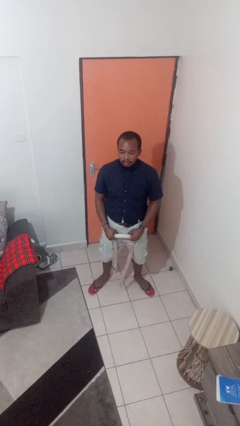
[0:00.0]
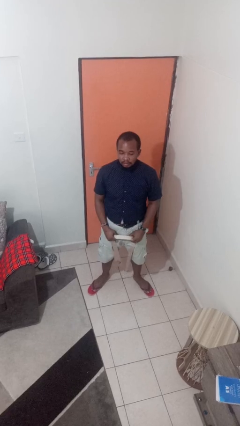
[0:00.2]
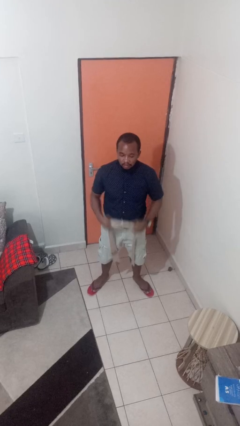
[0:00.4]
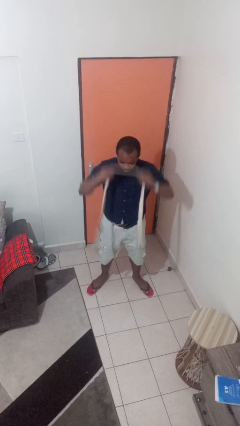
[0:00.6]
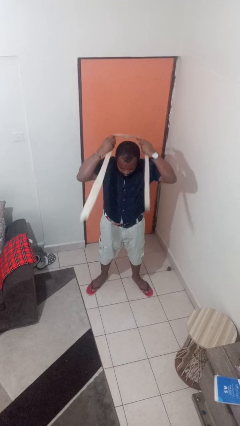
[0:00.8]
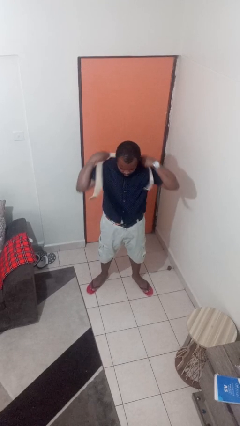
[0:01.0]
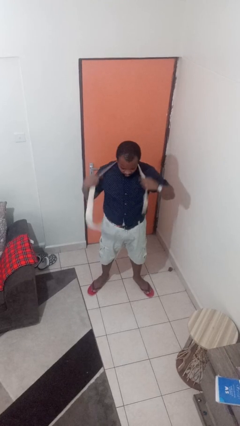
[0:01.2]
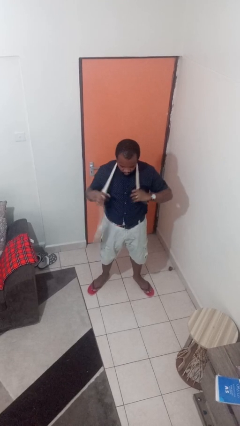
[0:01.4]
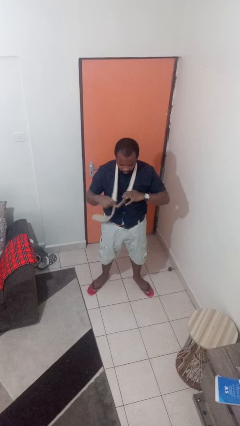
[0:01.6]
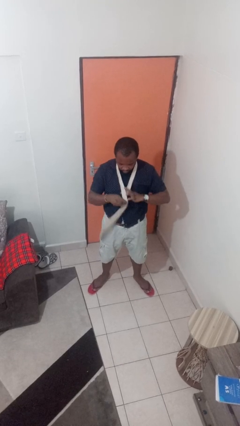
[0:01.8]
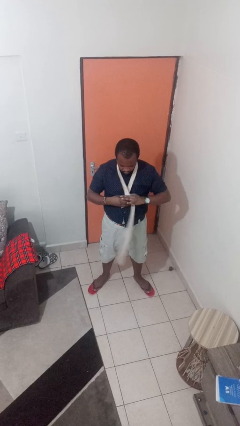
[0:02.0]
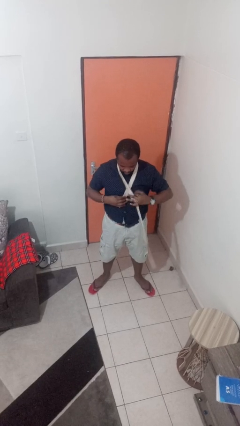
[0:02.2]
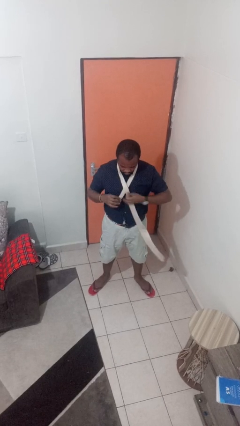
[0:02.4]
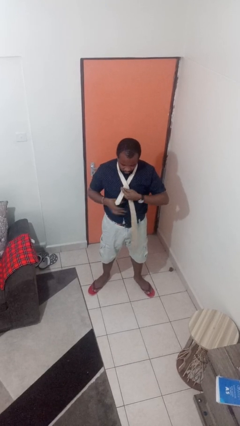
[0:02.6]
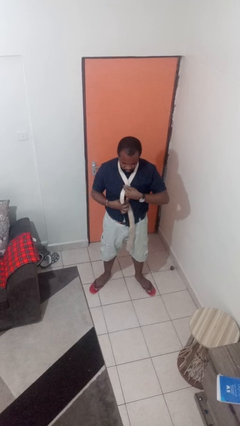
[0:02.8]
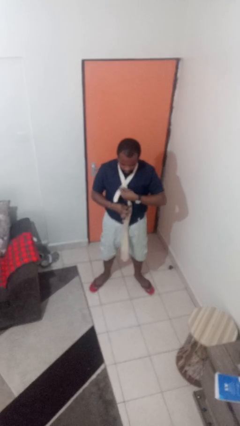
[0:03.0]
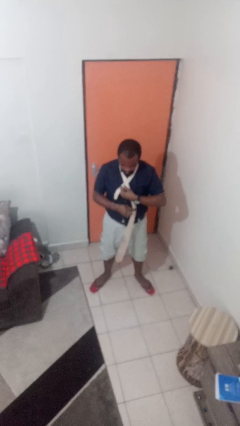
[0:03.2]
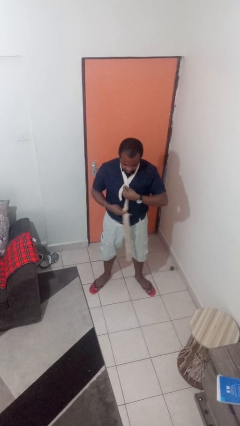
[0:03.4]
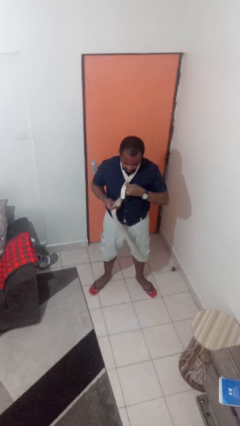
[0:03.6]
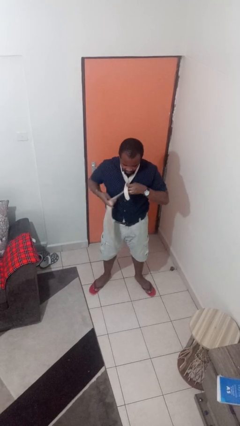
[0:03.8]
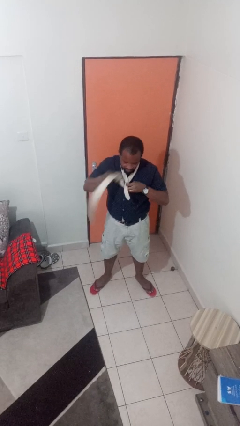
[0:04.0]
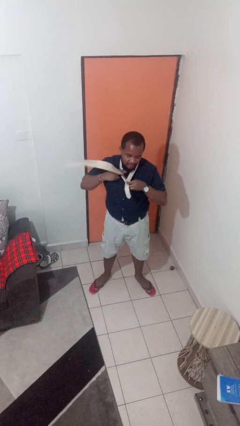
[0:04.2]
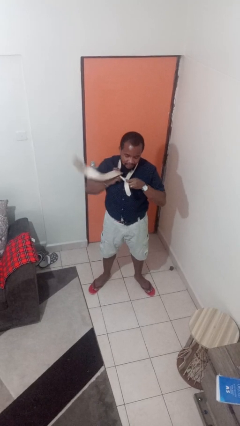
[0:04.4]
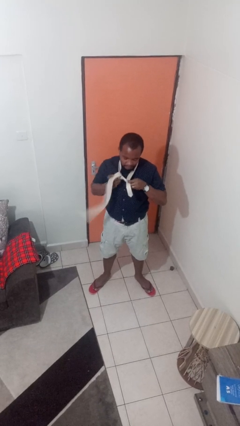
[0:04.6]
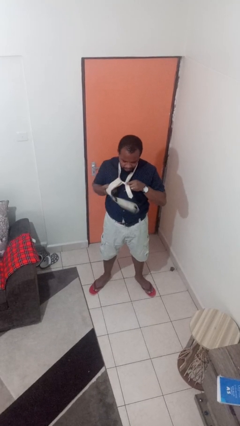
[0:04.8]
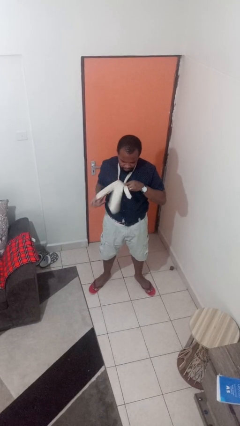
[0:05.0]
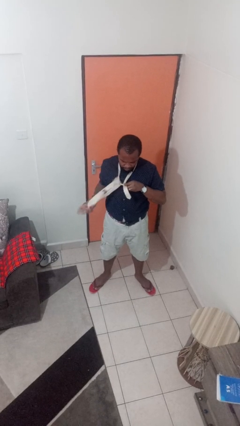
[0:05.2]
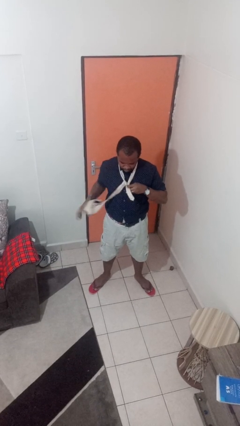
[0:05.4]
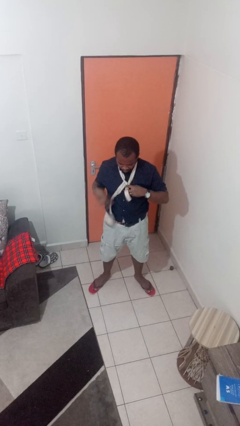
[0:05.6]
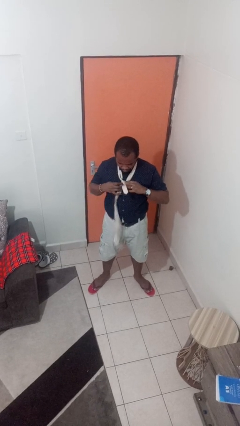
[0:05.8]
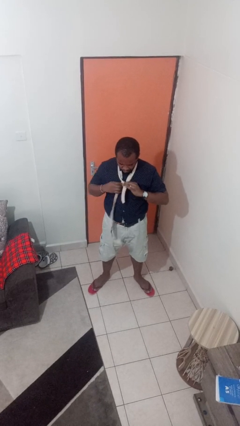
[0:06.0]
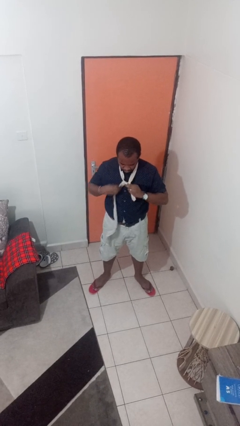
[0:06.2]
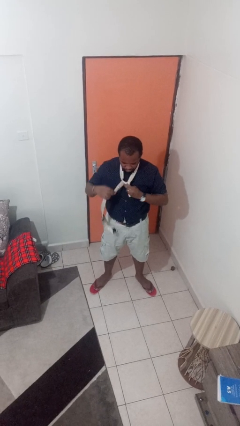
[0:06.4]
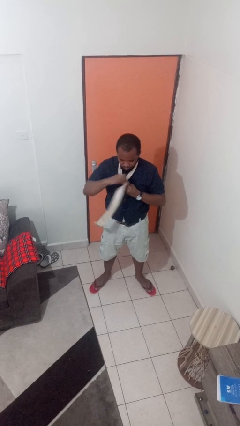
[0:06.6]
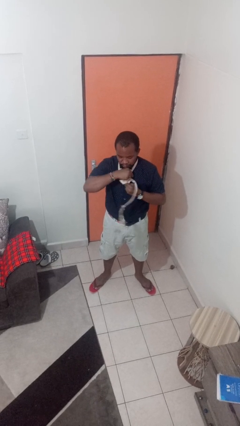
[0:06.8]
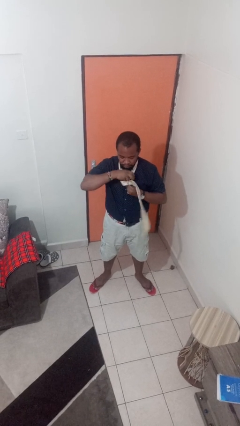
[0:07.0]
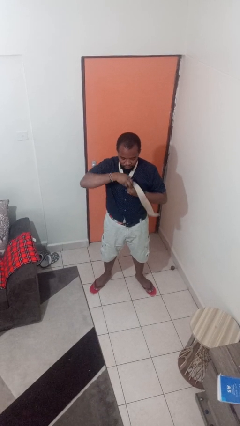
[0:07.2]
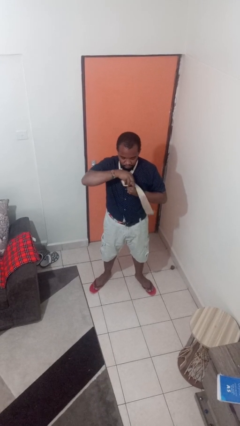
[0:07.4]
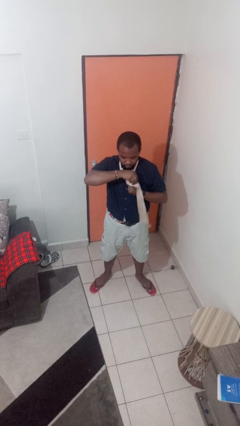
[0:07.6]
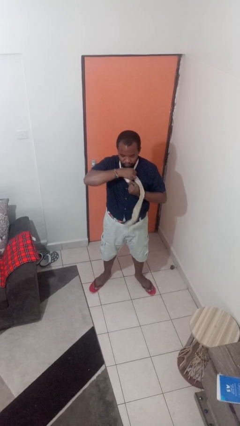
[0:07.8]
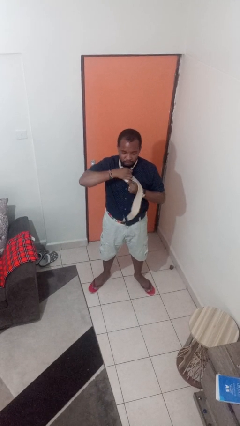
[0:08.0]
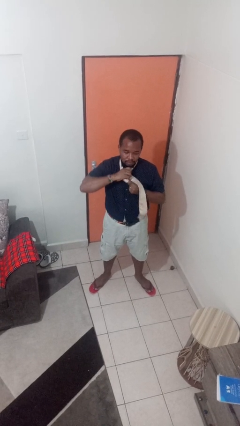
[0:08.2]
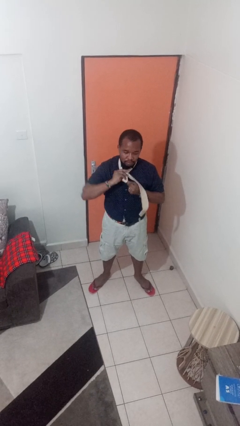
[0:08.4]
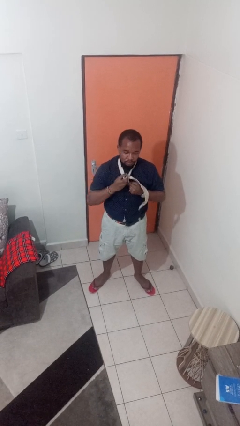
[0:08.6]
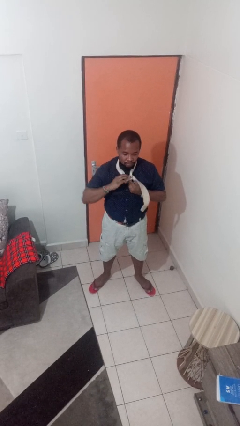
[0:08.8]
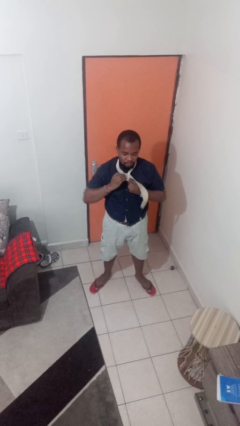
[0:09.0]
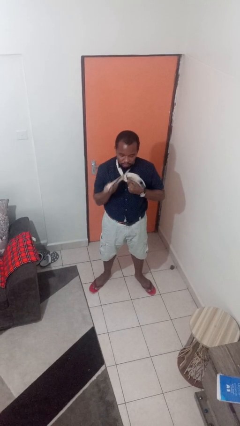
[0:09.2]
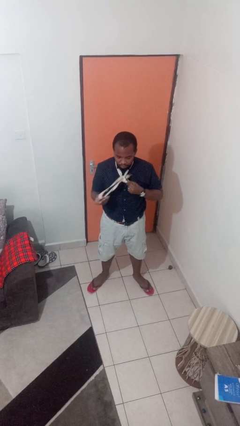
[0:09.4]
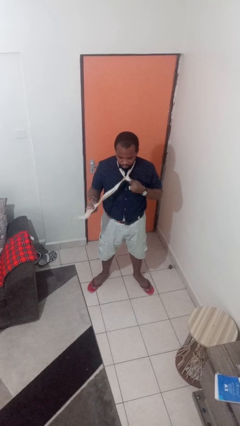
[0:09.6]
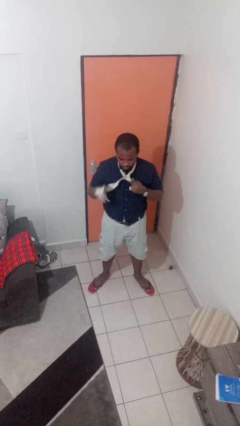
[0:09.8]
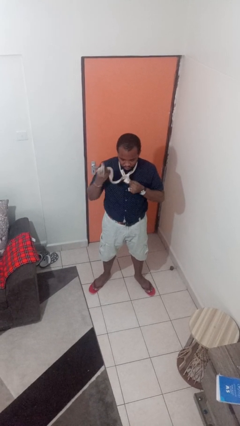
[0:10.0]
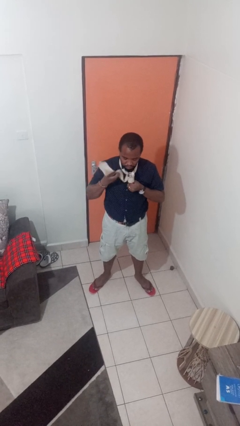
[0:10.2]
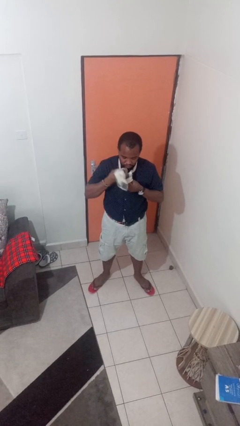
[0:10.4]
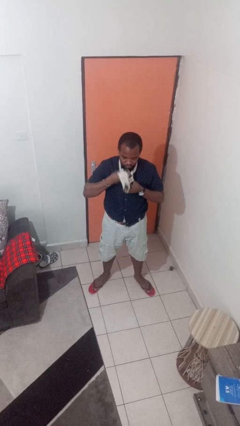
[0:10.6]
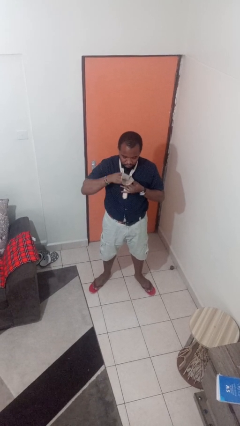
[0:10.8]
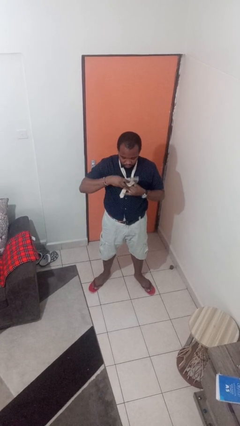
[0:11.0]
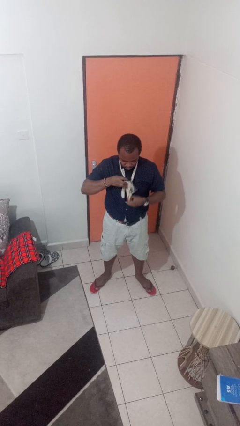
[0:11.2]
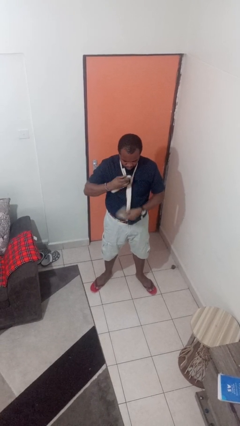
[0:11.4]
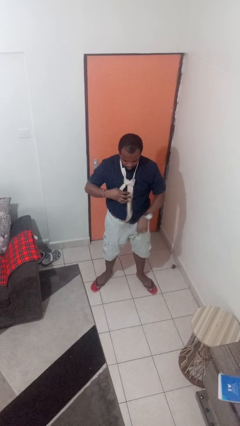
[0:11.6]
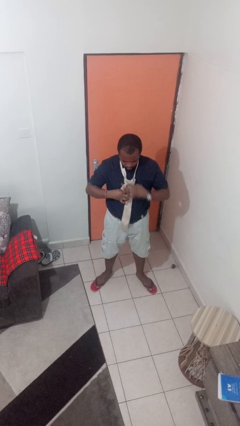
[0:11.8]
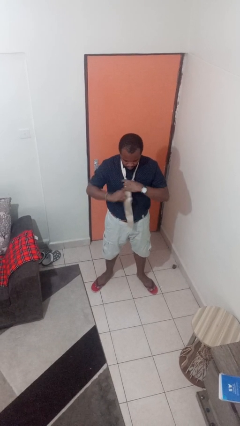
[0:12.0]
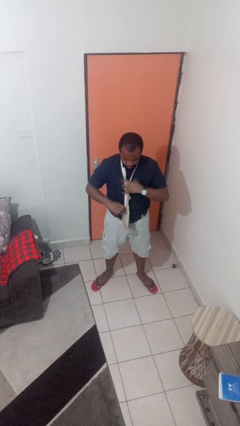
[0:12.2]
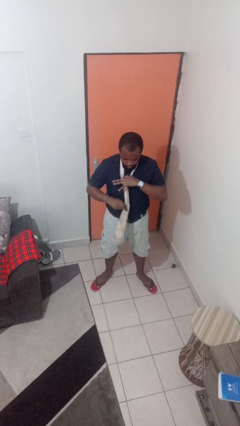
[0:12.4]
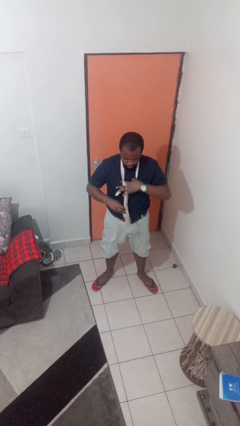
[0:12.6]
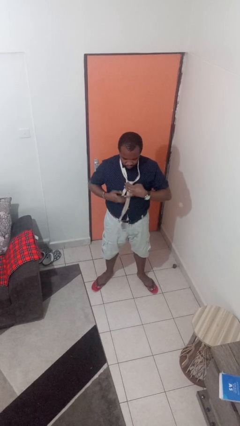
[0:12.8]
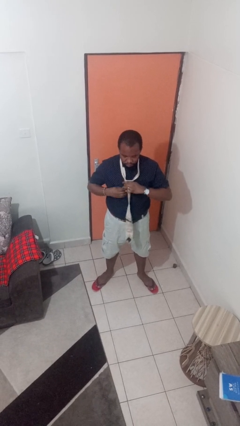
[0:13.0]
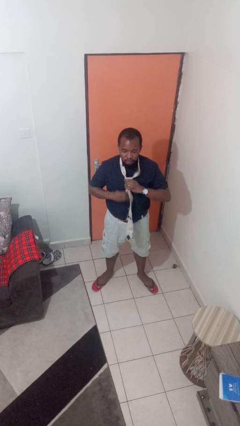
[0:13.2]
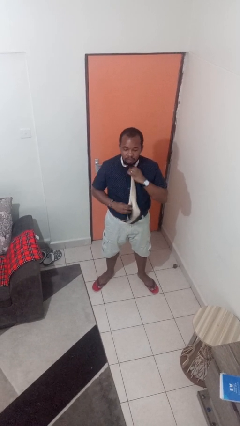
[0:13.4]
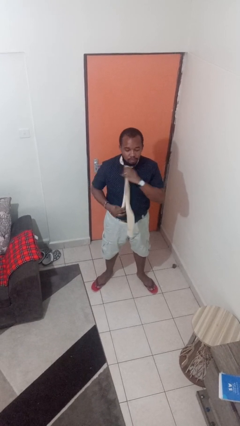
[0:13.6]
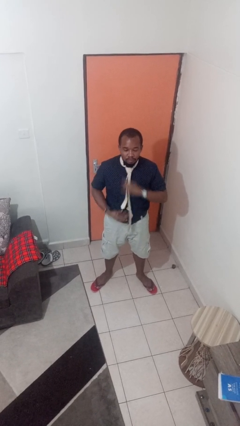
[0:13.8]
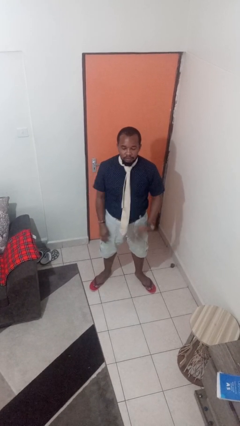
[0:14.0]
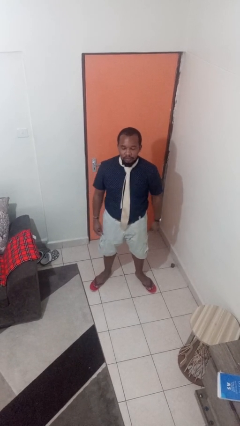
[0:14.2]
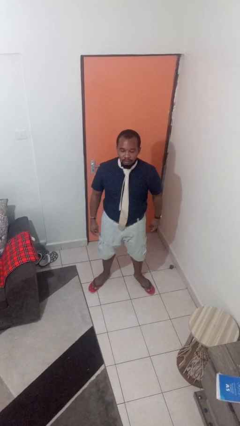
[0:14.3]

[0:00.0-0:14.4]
person puts on necktie

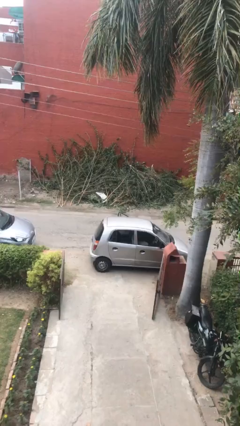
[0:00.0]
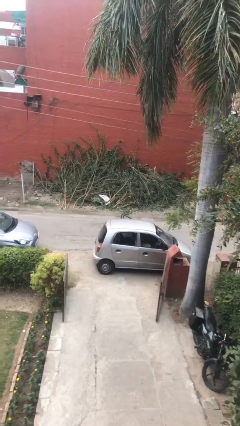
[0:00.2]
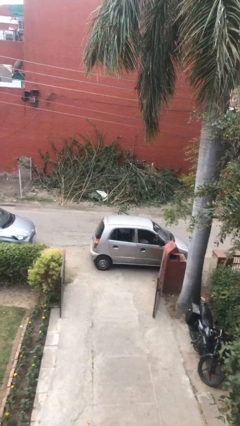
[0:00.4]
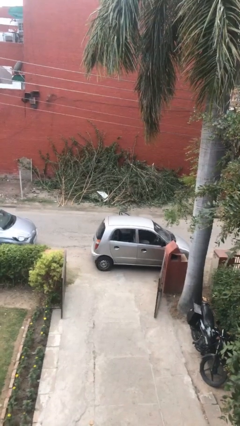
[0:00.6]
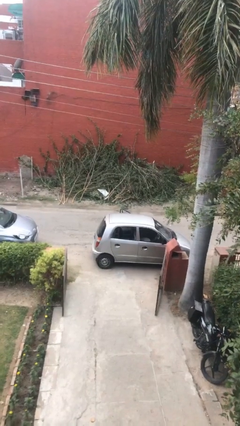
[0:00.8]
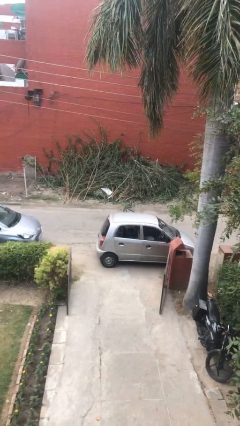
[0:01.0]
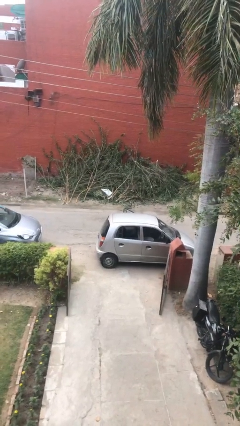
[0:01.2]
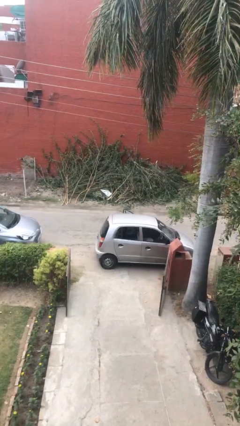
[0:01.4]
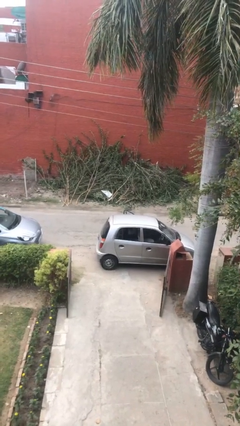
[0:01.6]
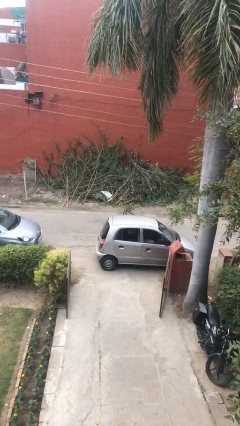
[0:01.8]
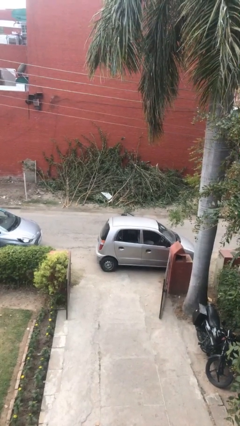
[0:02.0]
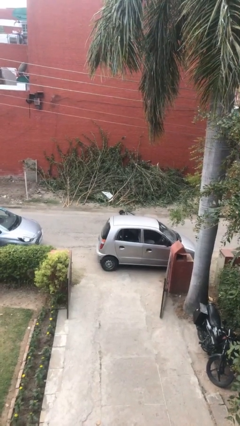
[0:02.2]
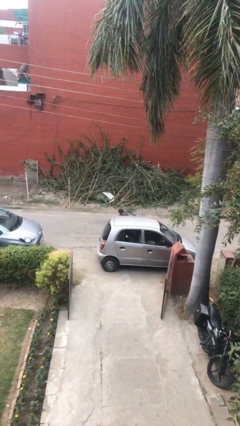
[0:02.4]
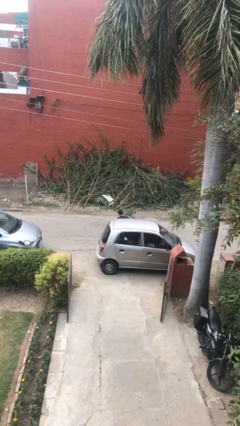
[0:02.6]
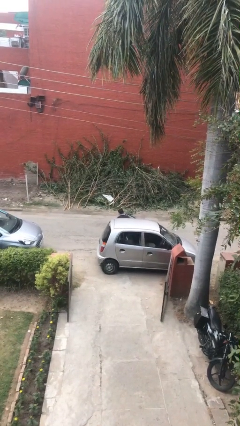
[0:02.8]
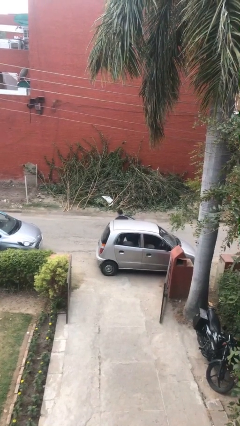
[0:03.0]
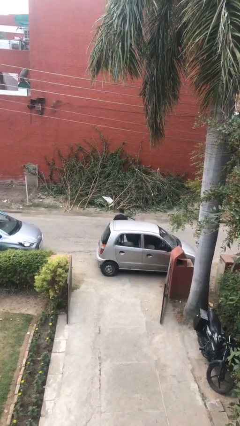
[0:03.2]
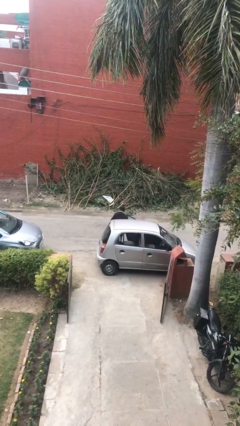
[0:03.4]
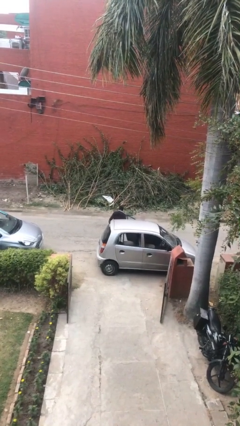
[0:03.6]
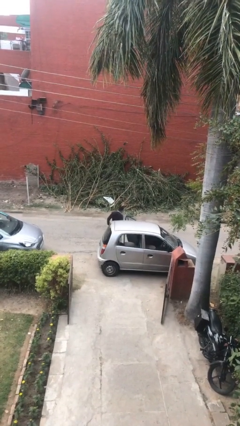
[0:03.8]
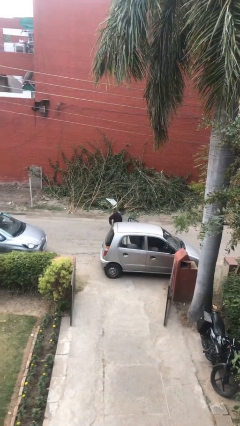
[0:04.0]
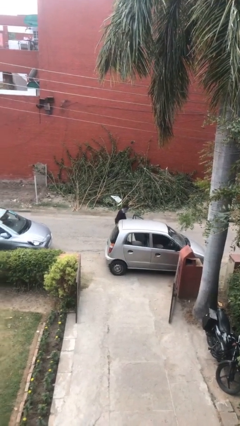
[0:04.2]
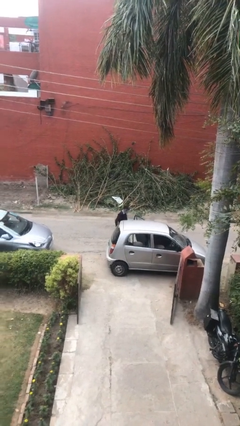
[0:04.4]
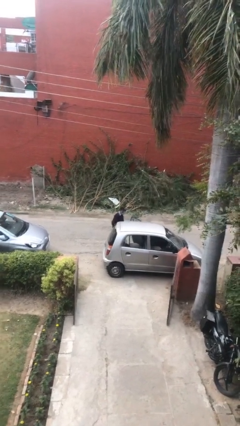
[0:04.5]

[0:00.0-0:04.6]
person exits car
